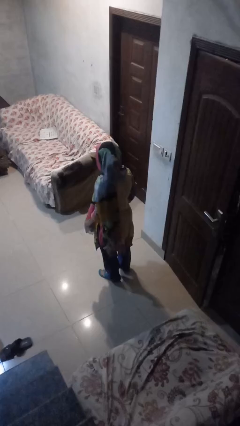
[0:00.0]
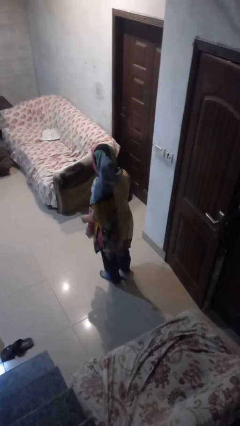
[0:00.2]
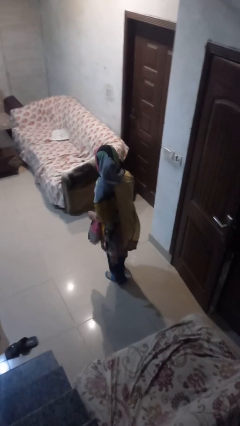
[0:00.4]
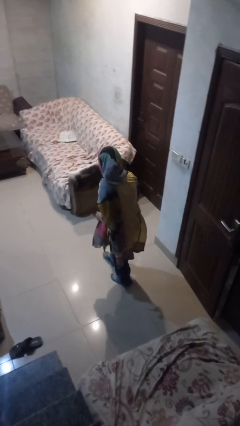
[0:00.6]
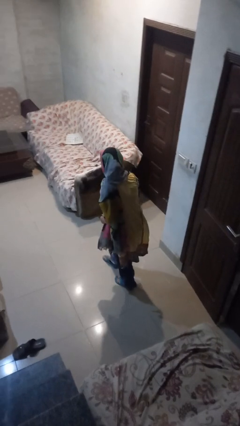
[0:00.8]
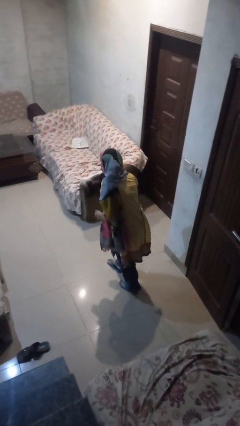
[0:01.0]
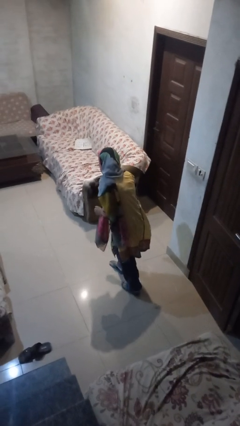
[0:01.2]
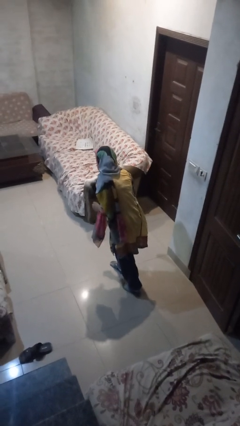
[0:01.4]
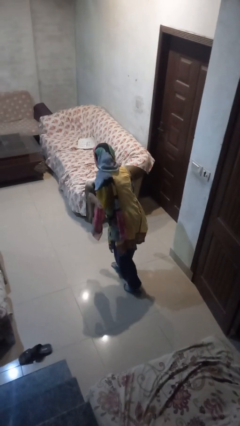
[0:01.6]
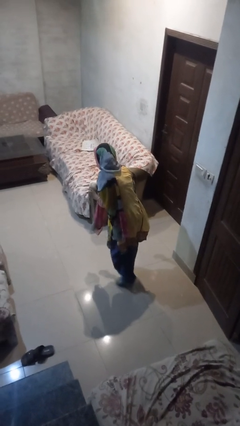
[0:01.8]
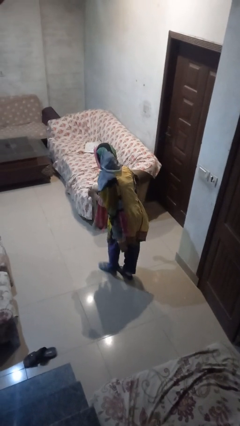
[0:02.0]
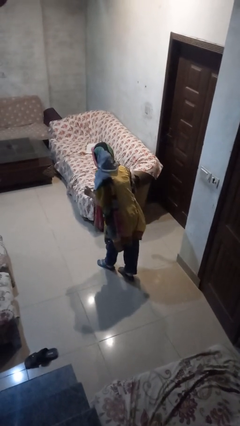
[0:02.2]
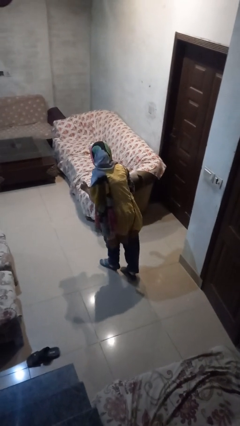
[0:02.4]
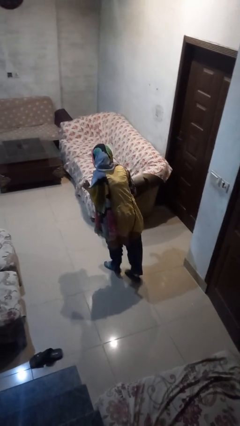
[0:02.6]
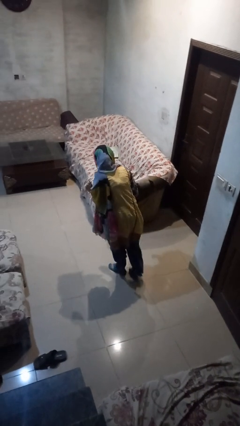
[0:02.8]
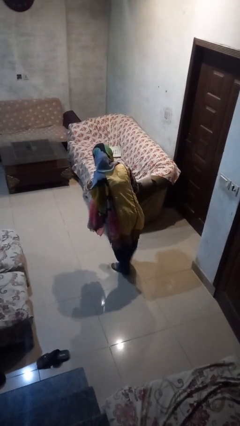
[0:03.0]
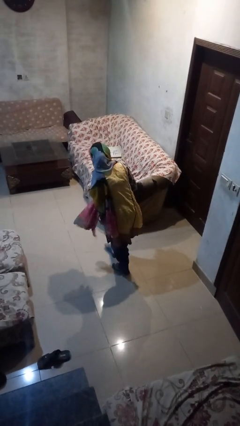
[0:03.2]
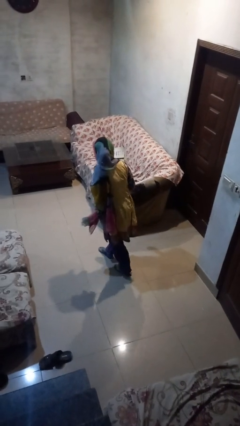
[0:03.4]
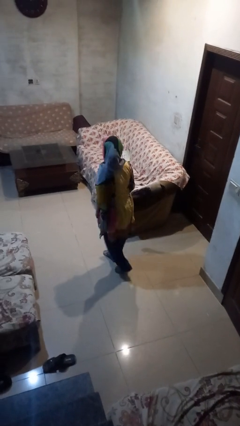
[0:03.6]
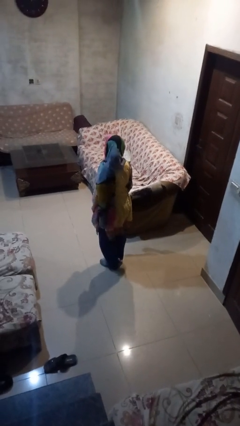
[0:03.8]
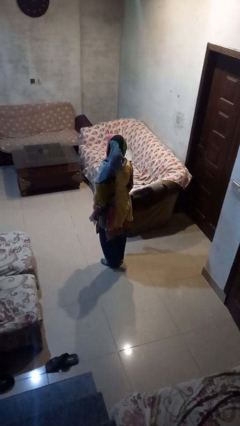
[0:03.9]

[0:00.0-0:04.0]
person walks tiptoe

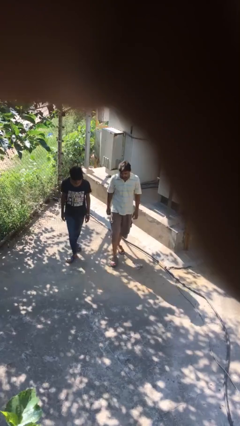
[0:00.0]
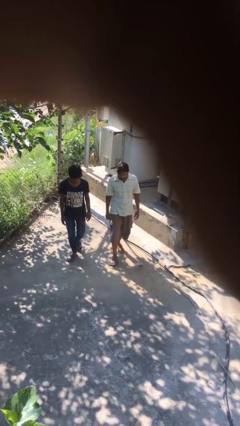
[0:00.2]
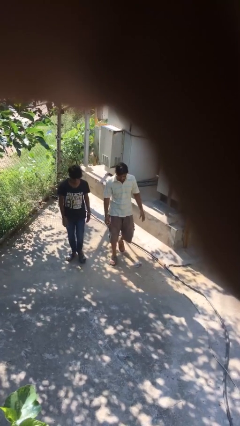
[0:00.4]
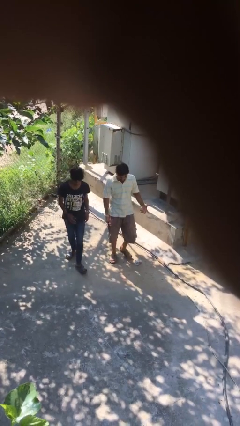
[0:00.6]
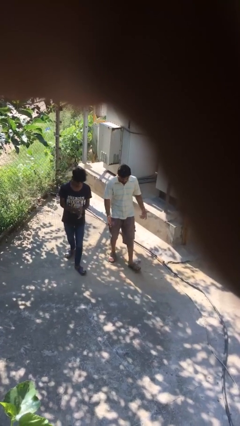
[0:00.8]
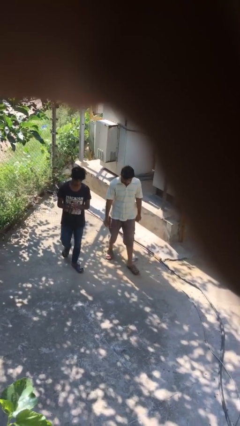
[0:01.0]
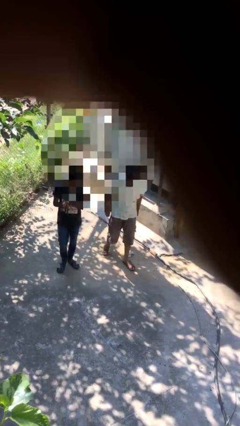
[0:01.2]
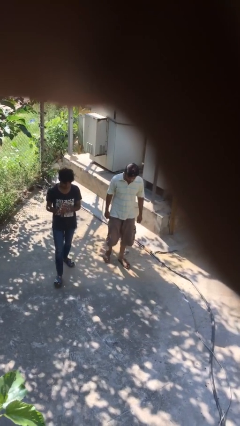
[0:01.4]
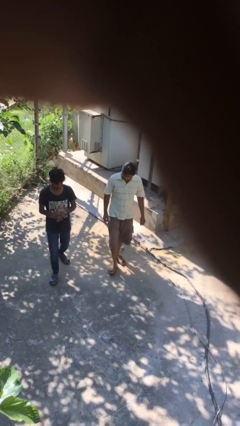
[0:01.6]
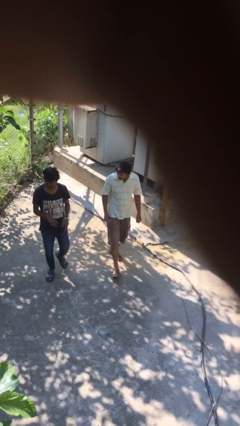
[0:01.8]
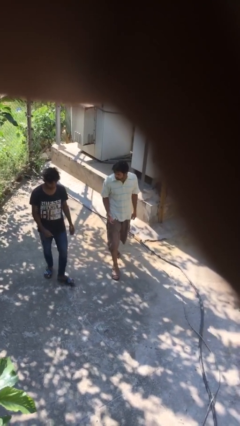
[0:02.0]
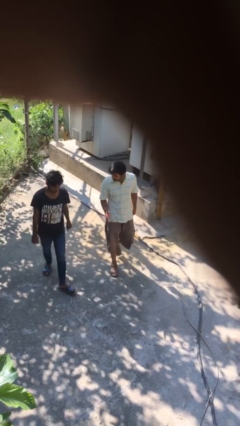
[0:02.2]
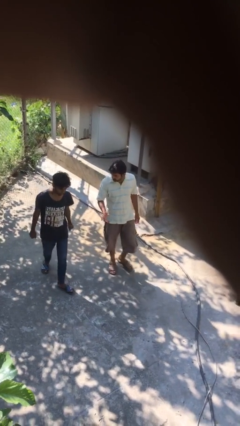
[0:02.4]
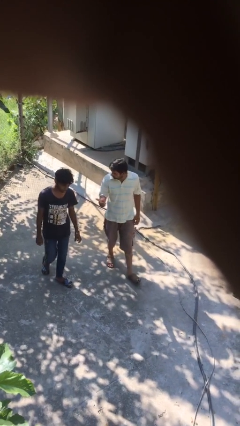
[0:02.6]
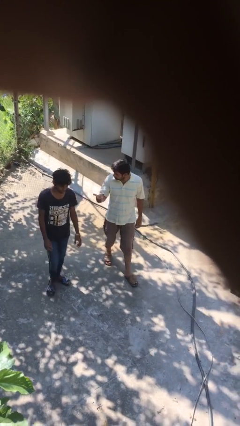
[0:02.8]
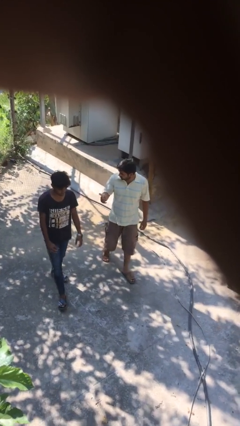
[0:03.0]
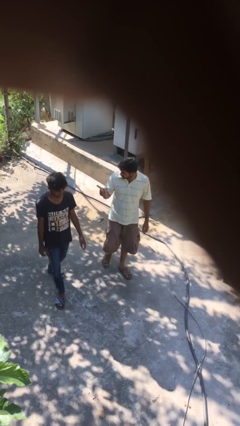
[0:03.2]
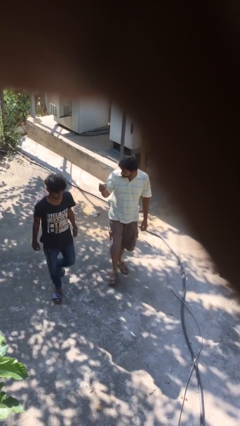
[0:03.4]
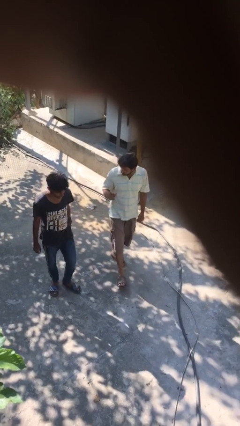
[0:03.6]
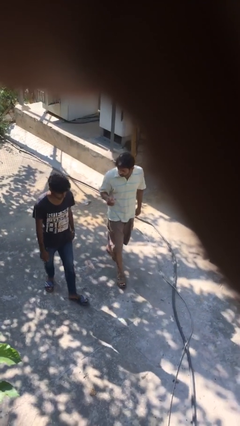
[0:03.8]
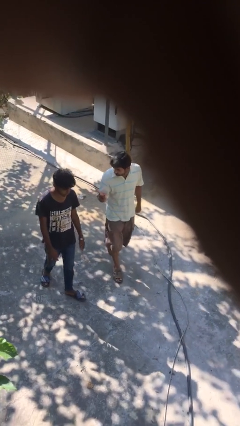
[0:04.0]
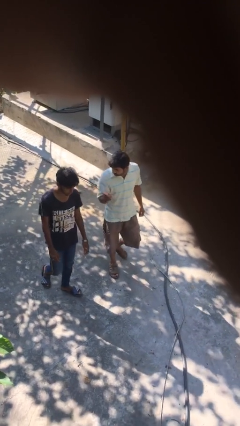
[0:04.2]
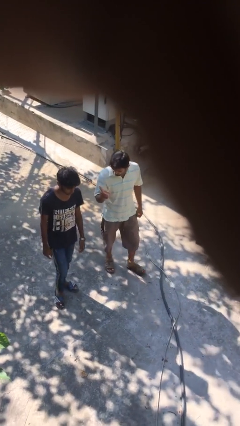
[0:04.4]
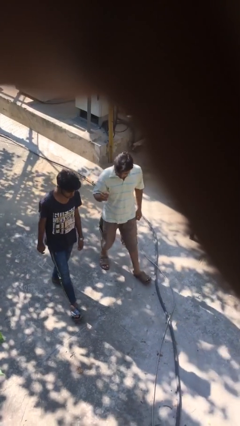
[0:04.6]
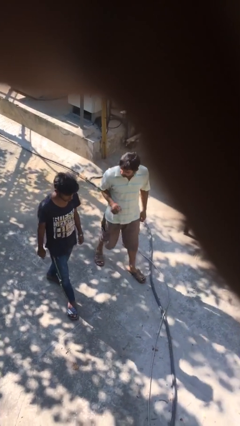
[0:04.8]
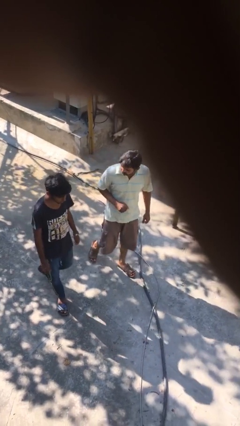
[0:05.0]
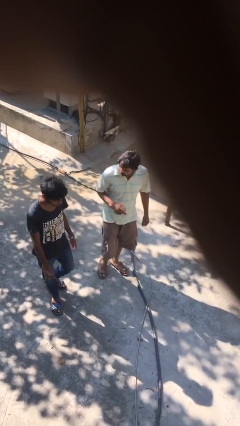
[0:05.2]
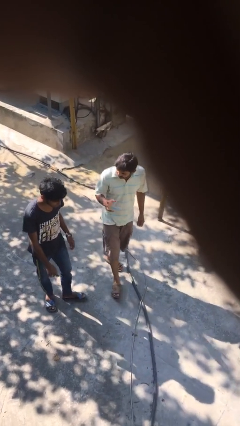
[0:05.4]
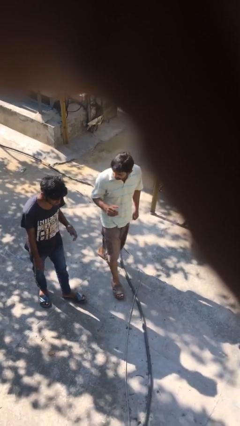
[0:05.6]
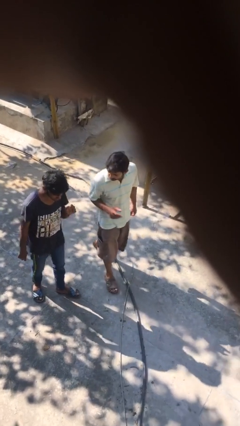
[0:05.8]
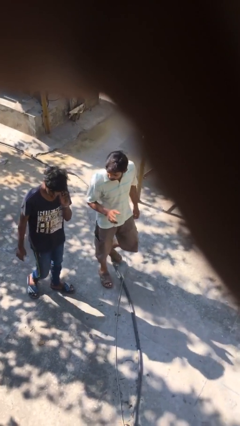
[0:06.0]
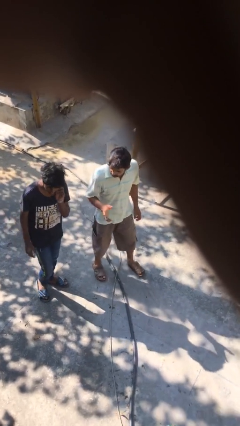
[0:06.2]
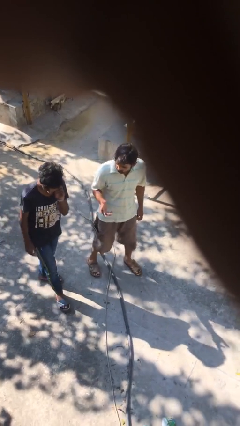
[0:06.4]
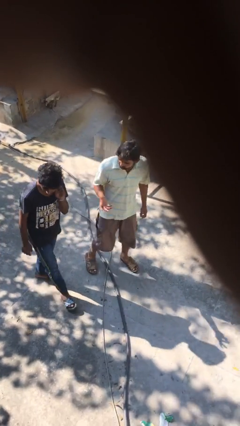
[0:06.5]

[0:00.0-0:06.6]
person talks to person

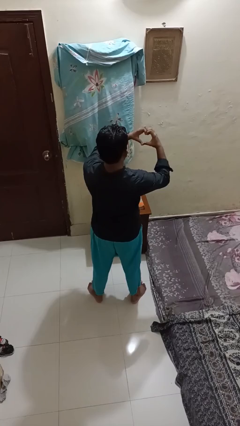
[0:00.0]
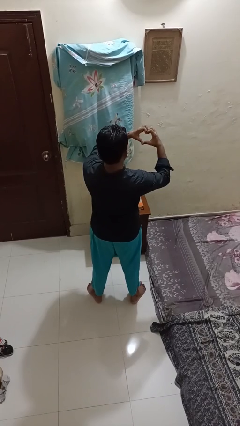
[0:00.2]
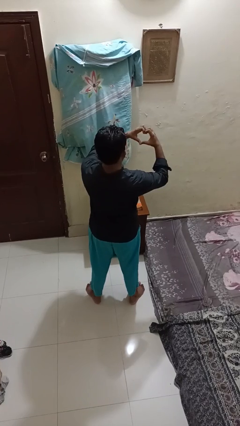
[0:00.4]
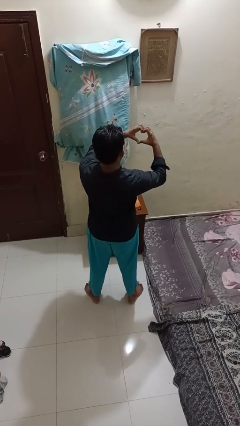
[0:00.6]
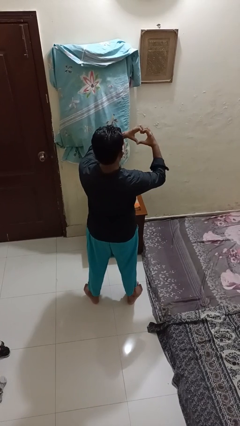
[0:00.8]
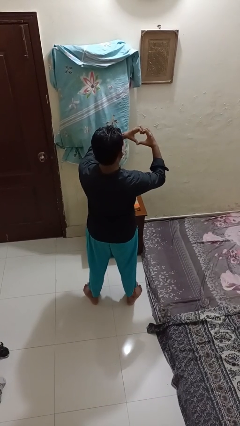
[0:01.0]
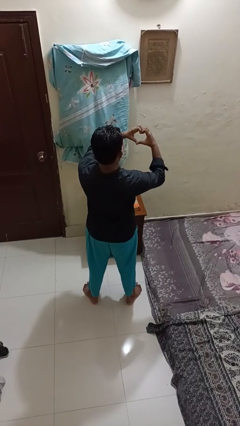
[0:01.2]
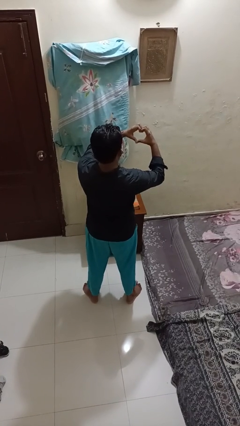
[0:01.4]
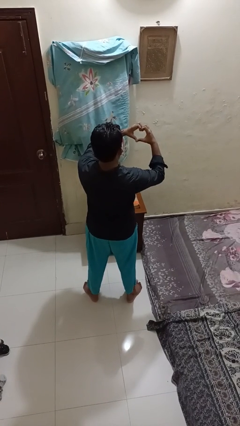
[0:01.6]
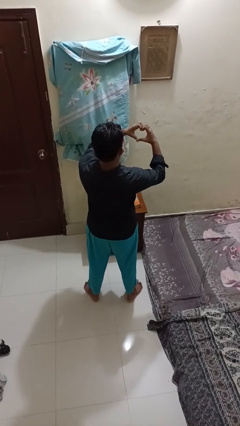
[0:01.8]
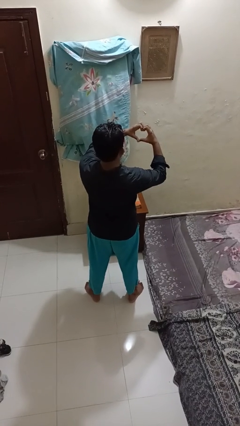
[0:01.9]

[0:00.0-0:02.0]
person gestures heart

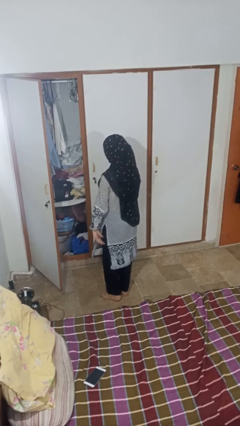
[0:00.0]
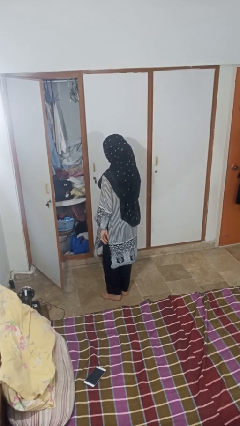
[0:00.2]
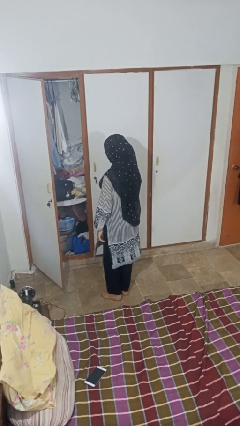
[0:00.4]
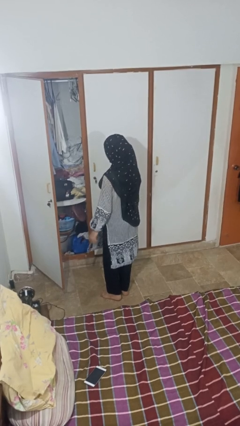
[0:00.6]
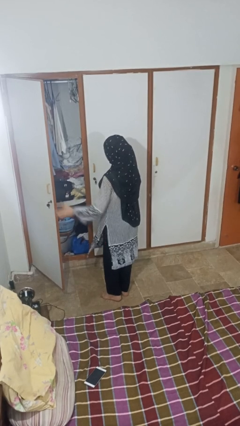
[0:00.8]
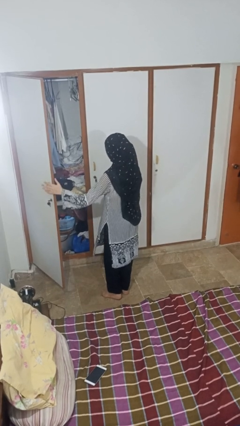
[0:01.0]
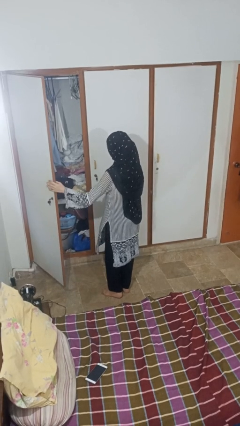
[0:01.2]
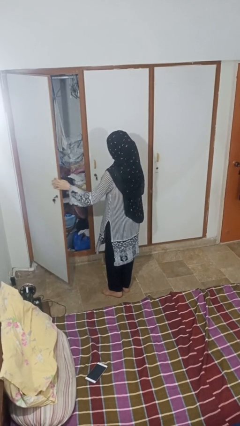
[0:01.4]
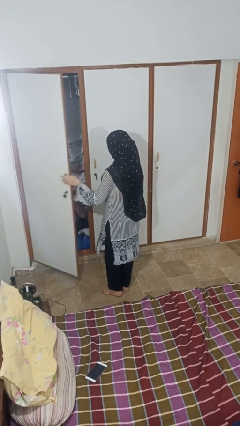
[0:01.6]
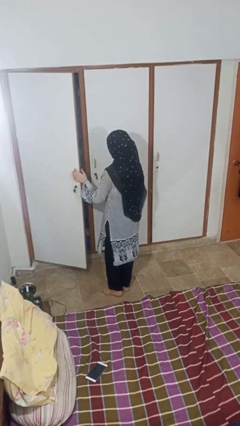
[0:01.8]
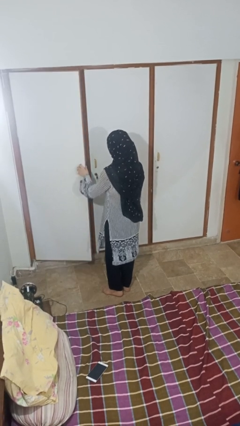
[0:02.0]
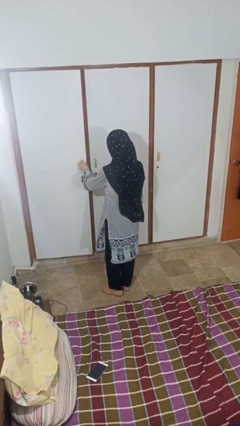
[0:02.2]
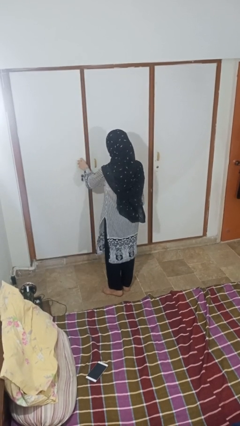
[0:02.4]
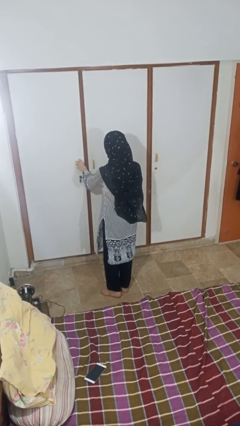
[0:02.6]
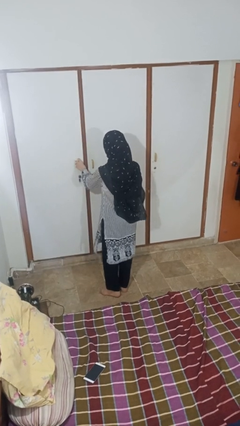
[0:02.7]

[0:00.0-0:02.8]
person closes closet door

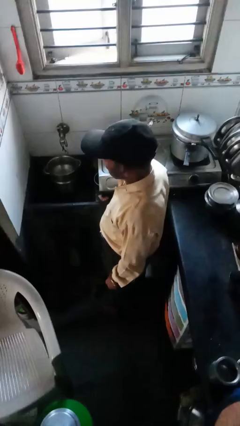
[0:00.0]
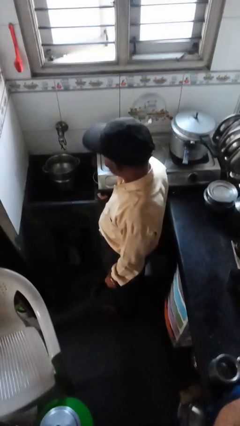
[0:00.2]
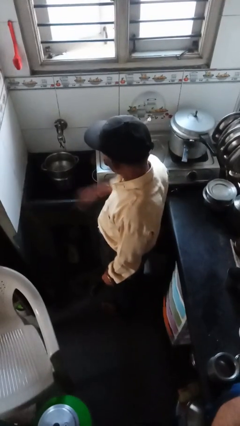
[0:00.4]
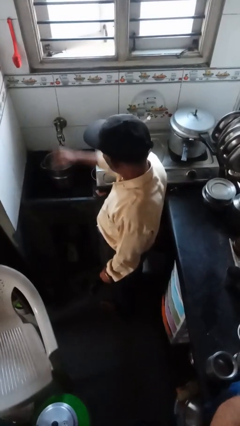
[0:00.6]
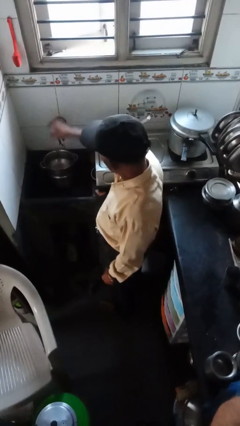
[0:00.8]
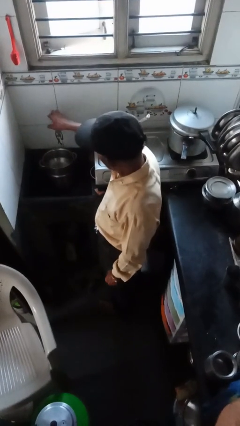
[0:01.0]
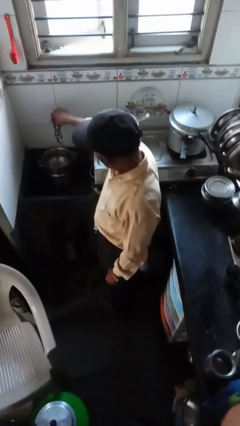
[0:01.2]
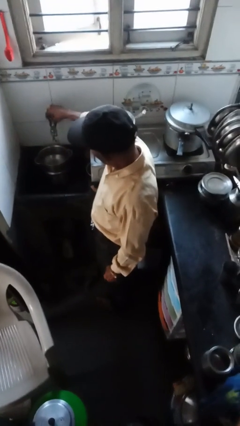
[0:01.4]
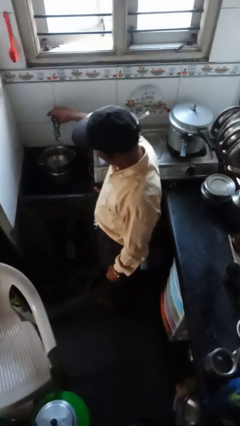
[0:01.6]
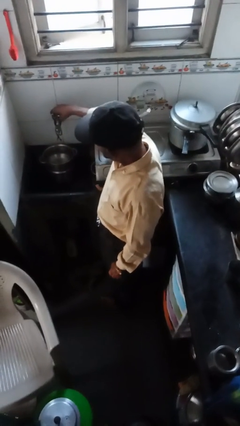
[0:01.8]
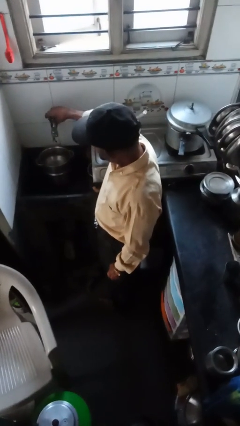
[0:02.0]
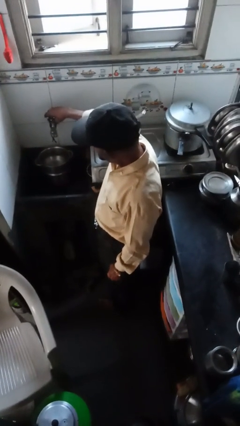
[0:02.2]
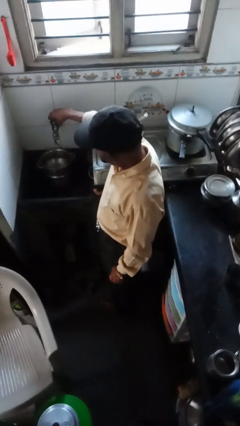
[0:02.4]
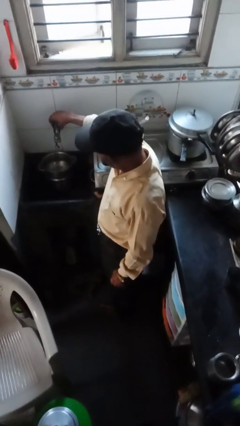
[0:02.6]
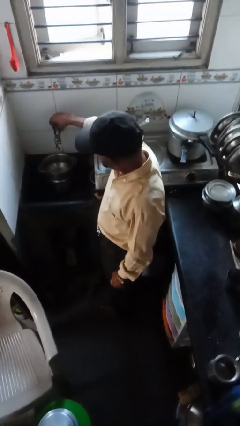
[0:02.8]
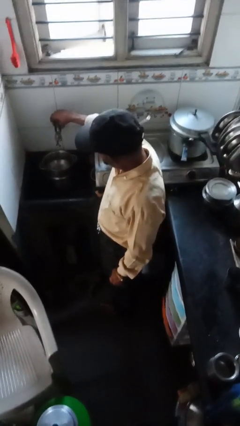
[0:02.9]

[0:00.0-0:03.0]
person turns on faucet
